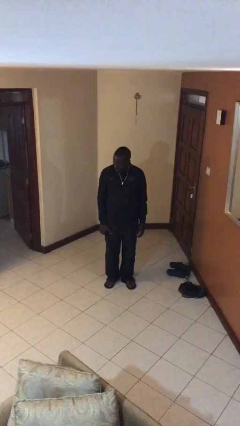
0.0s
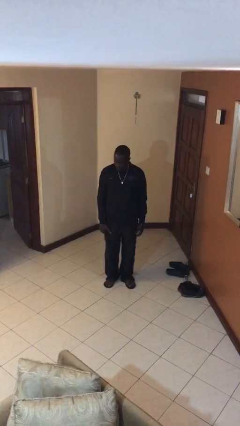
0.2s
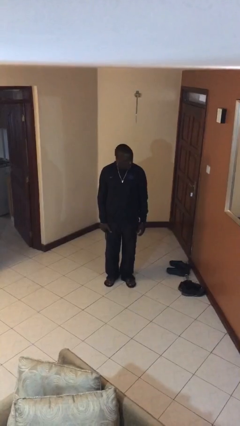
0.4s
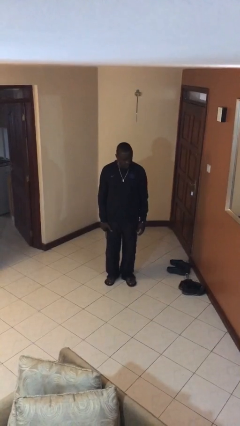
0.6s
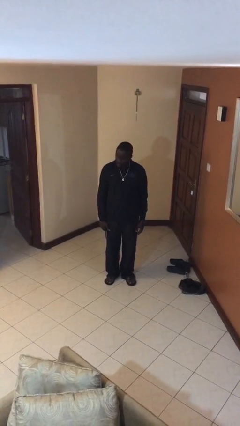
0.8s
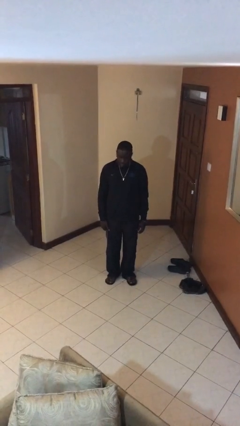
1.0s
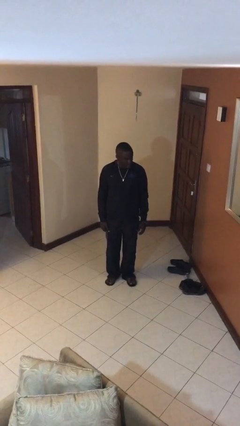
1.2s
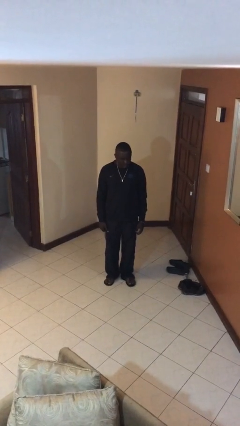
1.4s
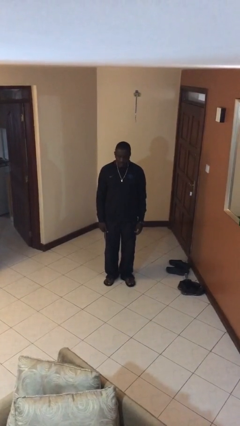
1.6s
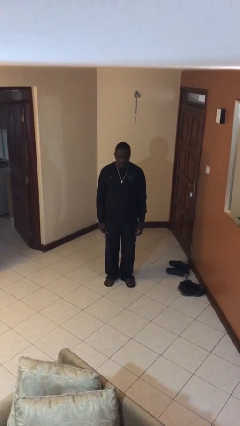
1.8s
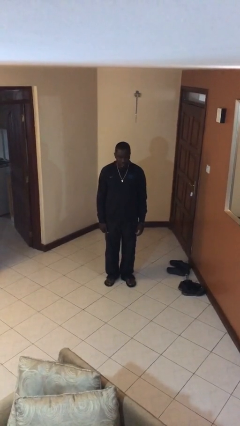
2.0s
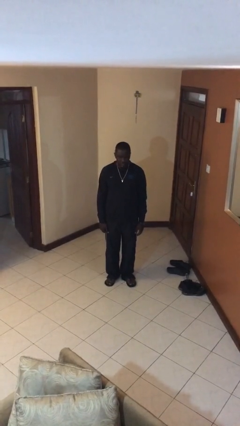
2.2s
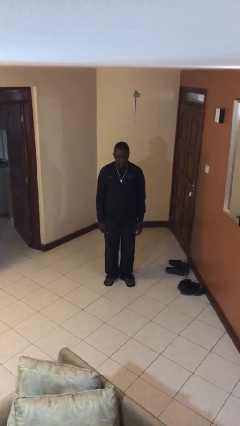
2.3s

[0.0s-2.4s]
person shakes head

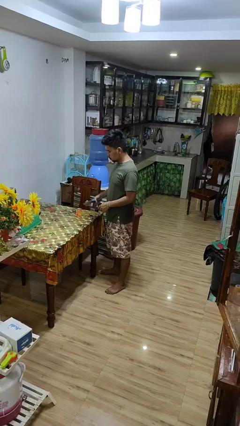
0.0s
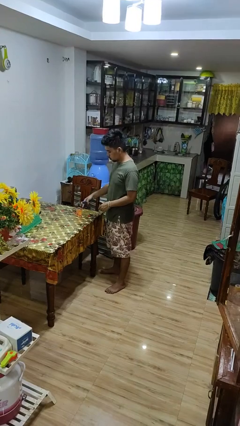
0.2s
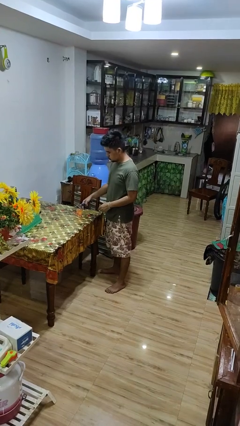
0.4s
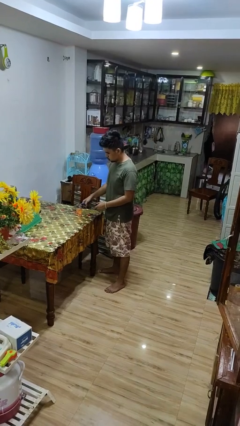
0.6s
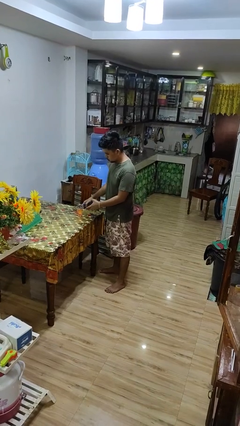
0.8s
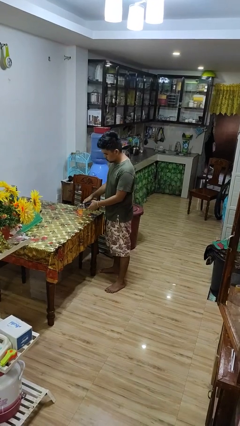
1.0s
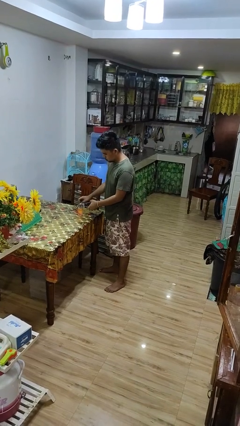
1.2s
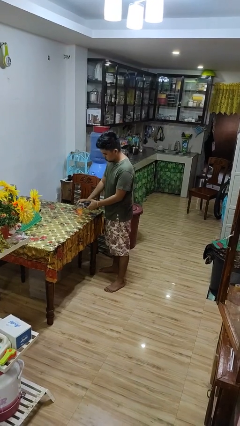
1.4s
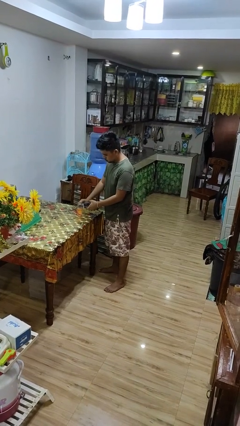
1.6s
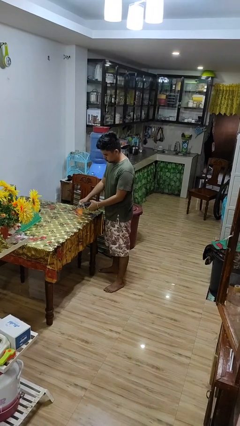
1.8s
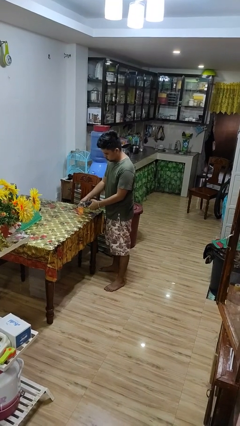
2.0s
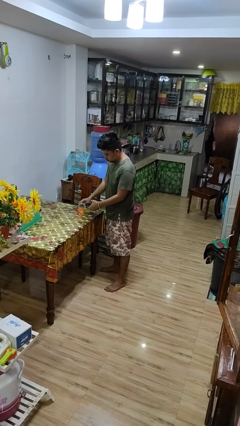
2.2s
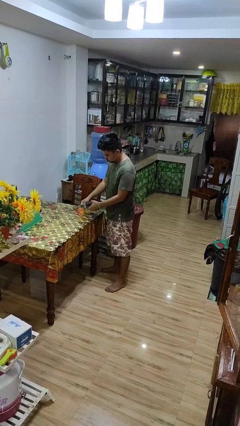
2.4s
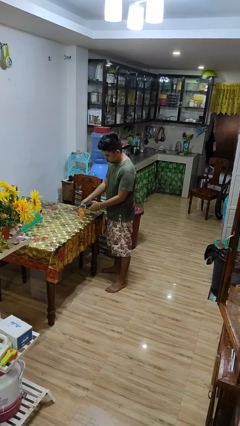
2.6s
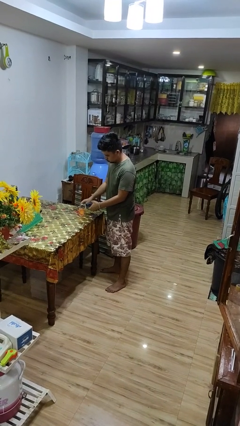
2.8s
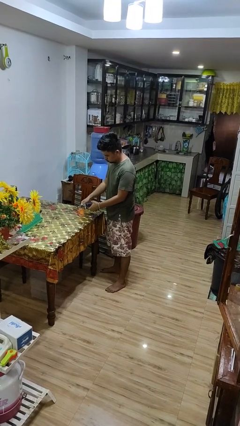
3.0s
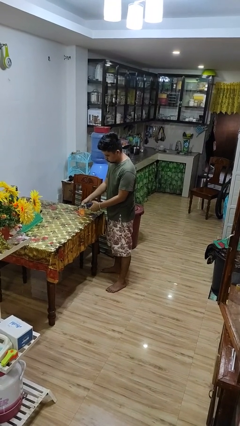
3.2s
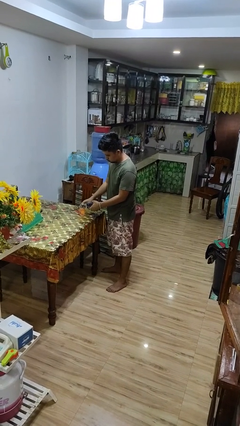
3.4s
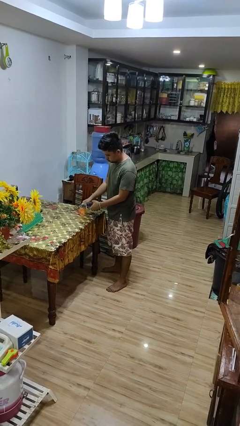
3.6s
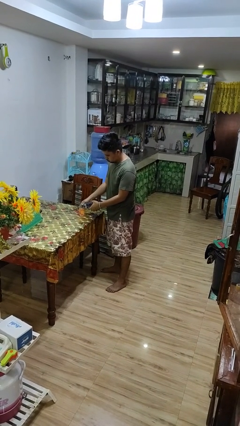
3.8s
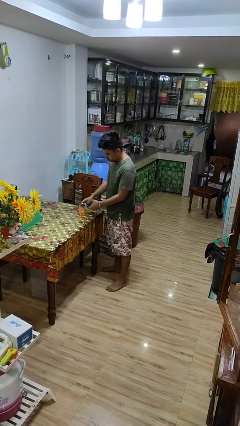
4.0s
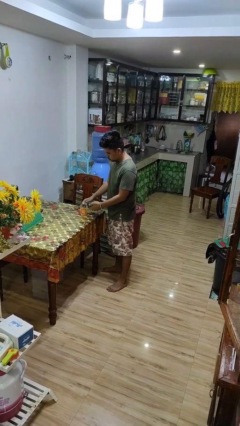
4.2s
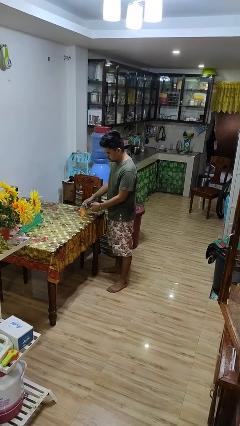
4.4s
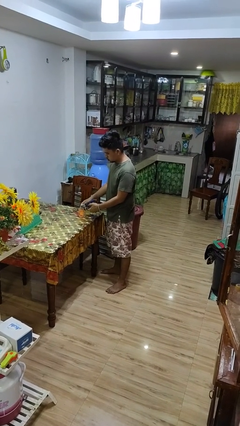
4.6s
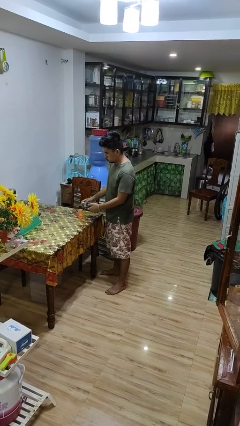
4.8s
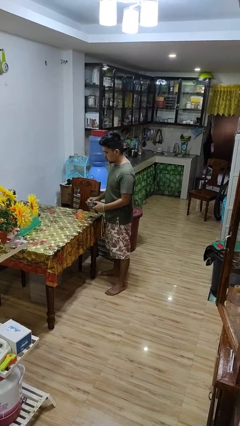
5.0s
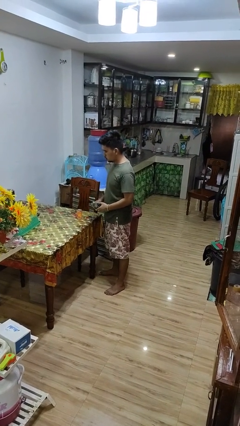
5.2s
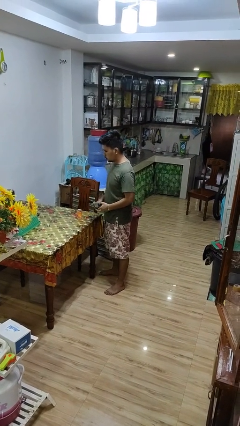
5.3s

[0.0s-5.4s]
person opens can with can opener

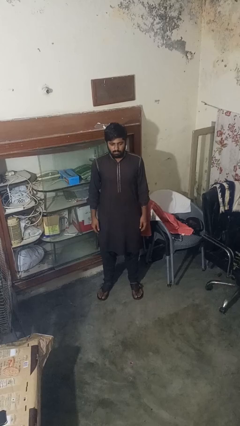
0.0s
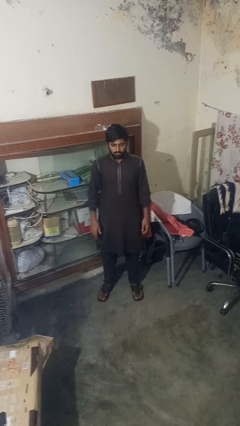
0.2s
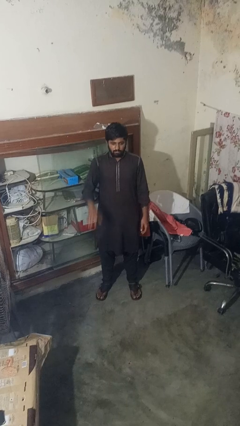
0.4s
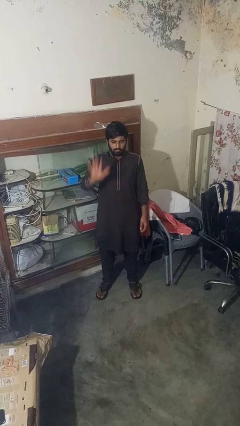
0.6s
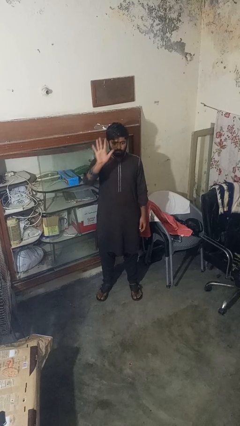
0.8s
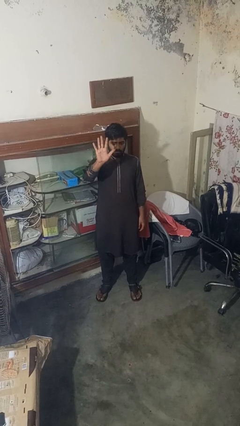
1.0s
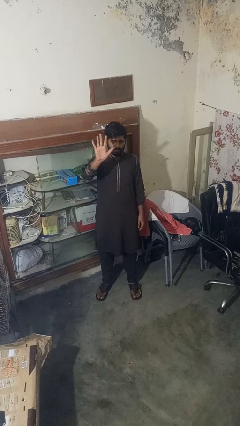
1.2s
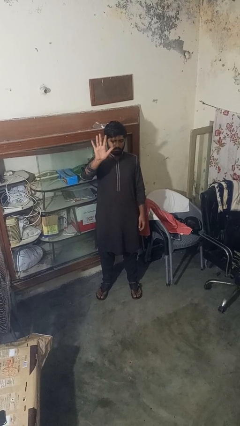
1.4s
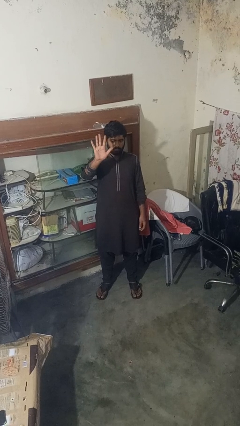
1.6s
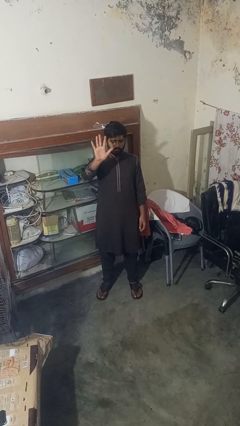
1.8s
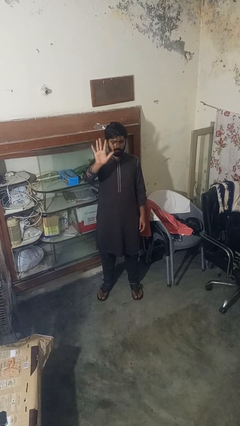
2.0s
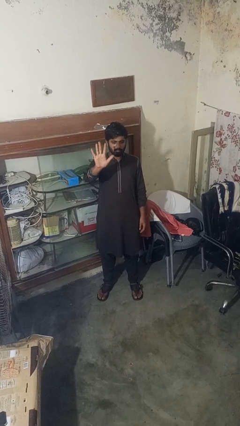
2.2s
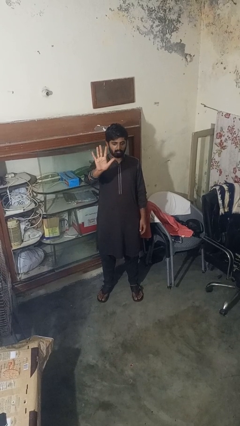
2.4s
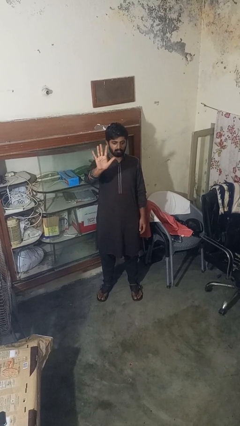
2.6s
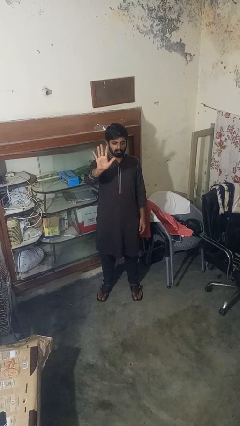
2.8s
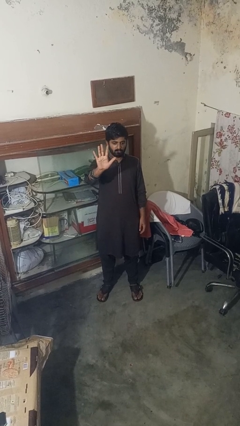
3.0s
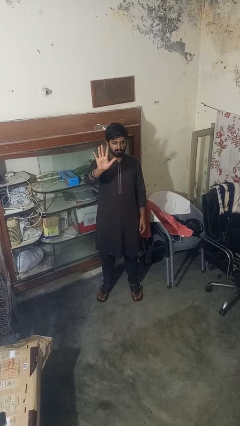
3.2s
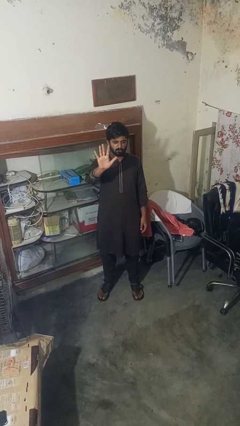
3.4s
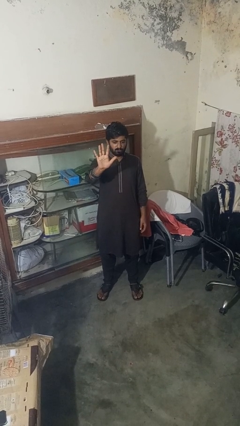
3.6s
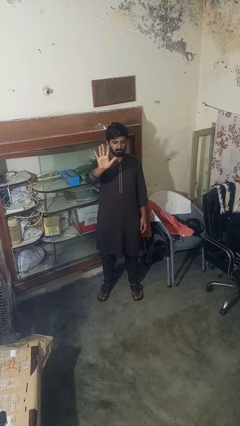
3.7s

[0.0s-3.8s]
person gestures number five

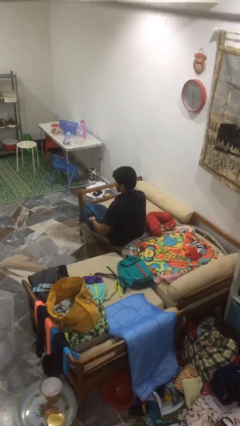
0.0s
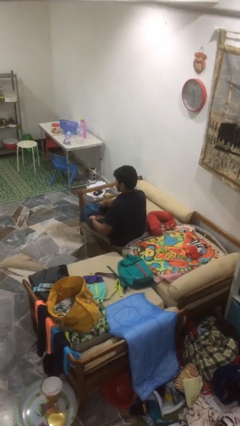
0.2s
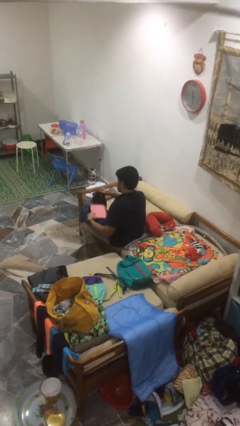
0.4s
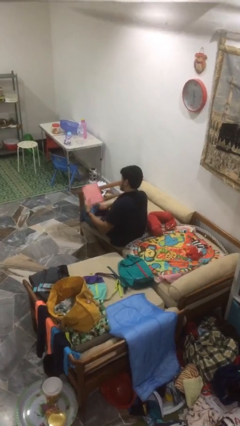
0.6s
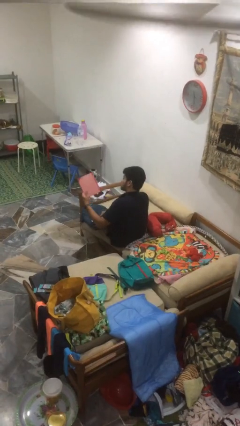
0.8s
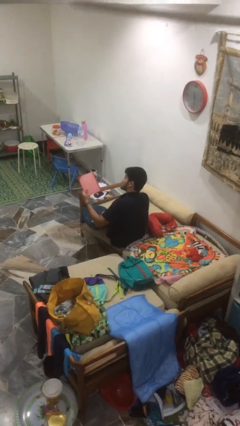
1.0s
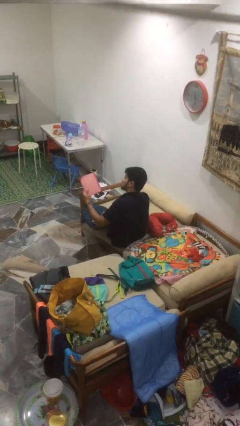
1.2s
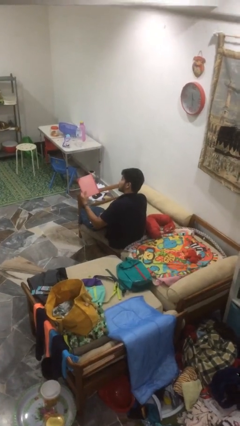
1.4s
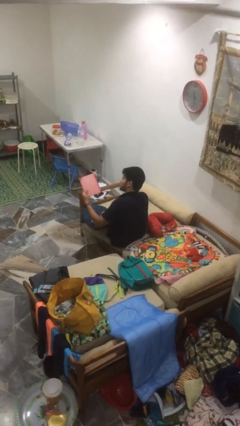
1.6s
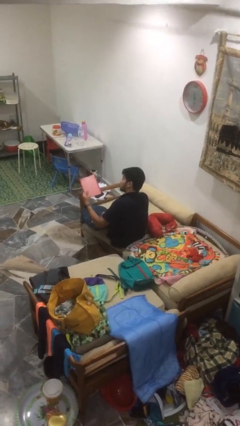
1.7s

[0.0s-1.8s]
person takes object from bag

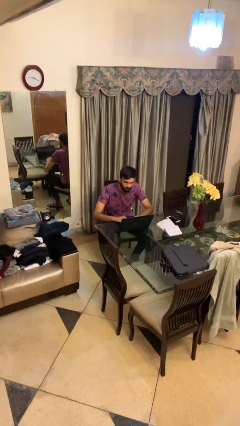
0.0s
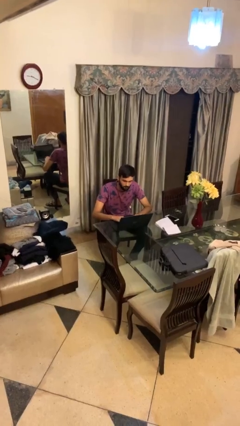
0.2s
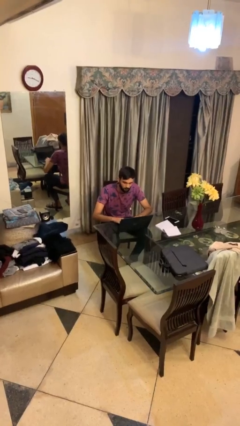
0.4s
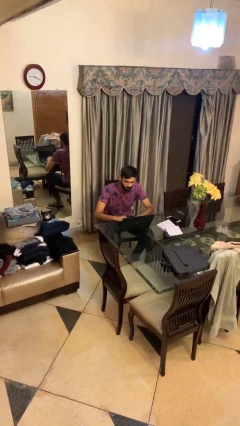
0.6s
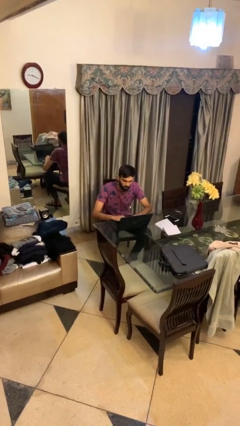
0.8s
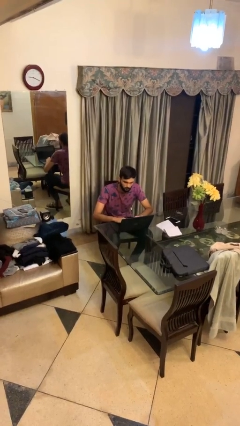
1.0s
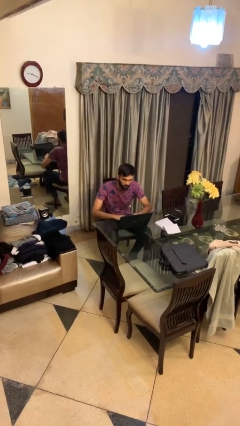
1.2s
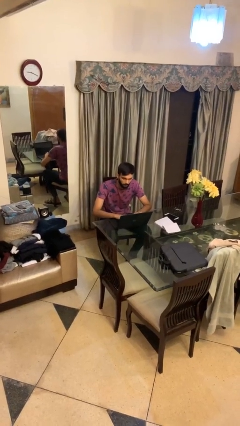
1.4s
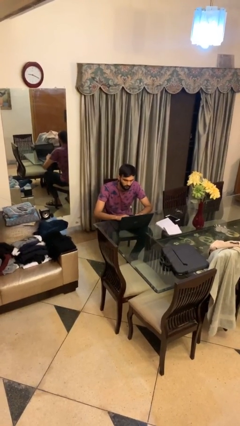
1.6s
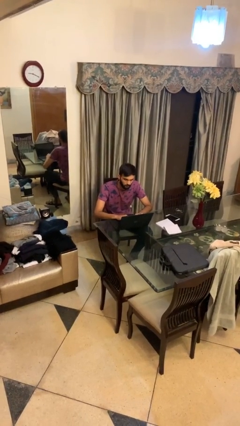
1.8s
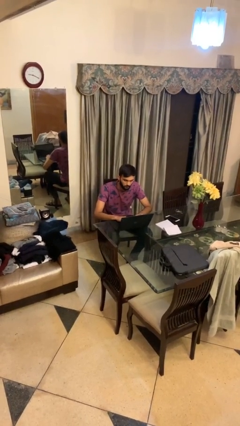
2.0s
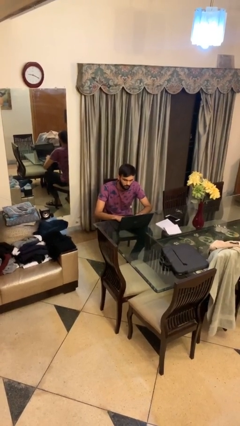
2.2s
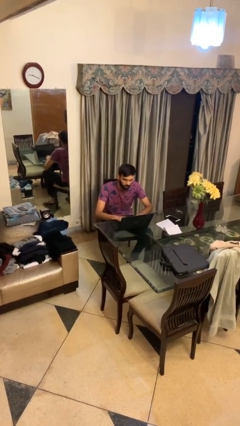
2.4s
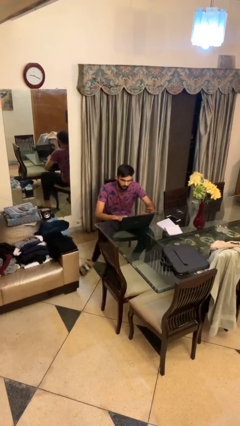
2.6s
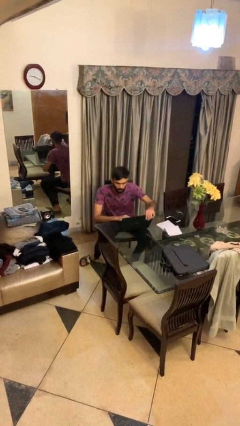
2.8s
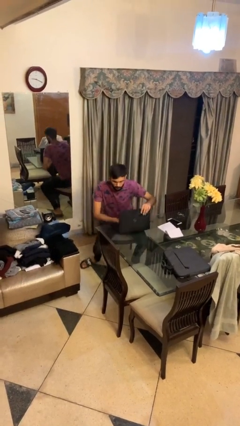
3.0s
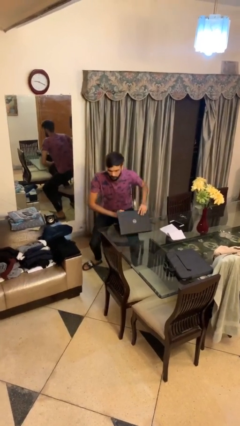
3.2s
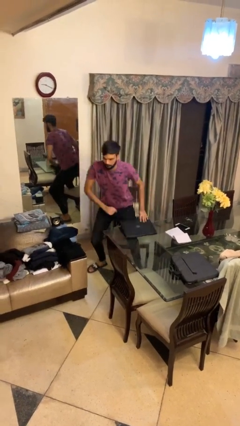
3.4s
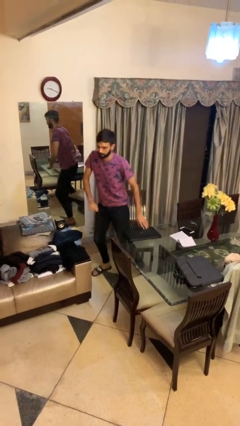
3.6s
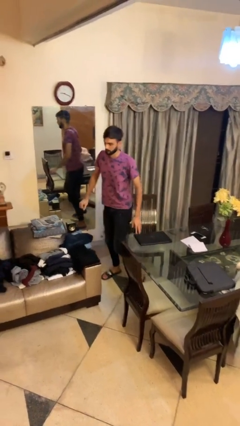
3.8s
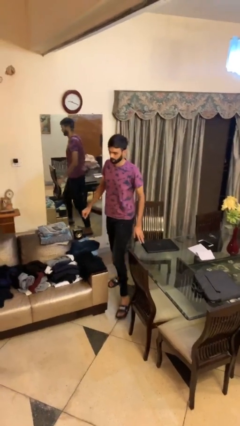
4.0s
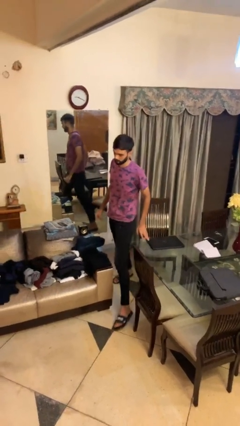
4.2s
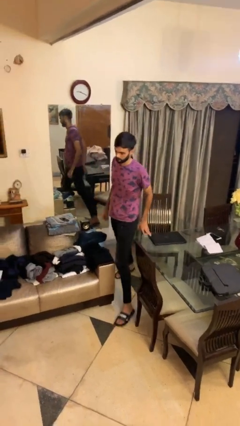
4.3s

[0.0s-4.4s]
person stands up
